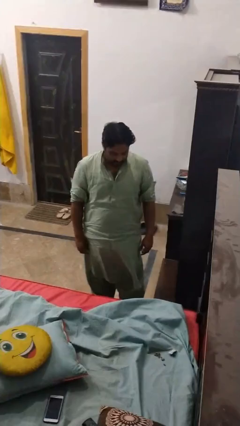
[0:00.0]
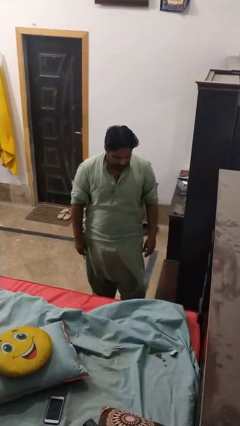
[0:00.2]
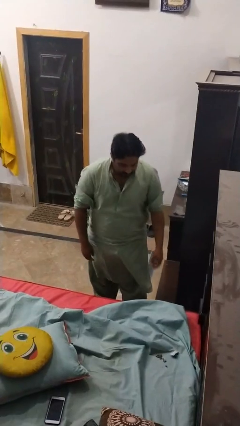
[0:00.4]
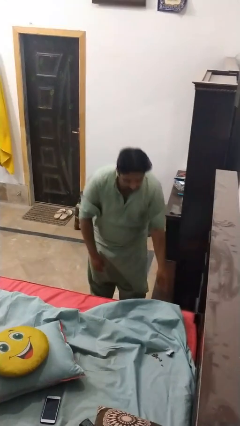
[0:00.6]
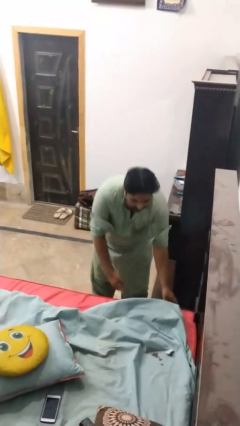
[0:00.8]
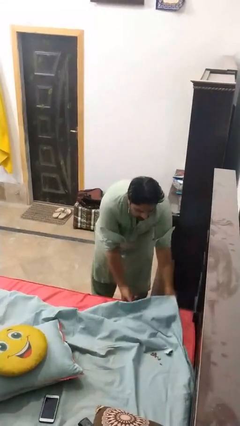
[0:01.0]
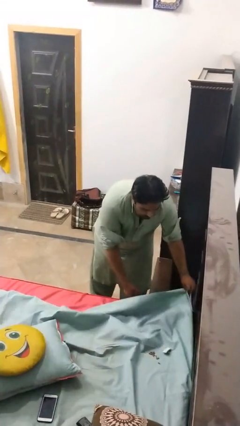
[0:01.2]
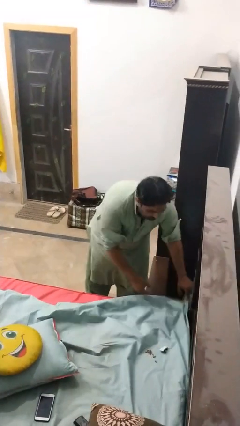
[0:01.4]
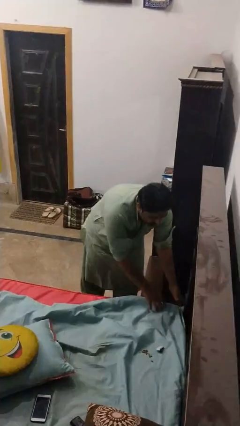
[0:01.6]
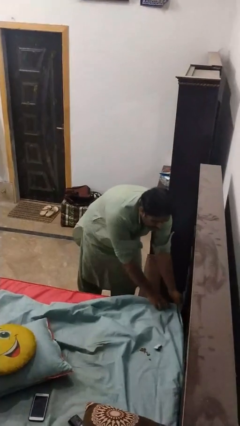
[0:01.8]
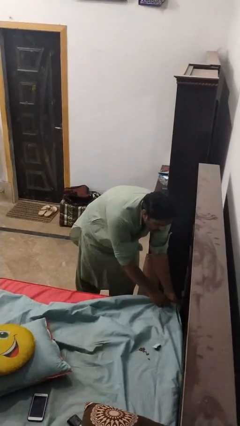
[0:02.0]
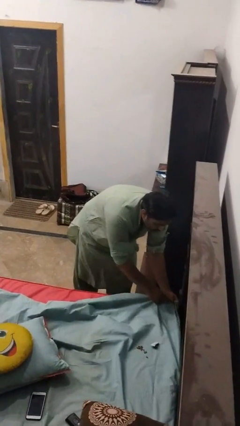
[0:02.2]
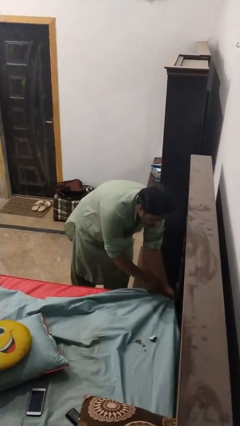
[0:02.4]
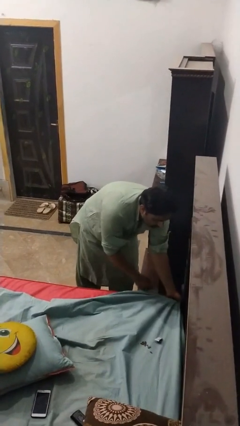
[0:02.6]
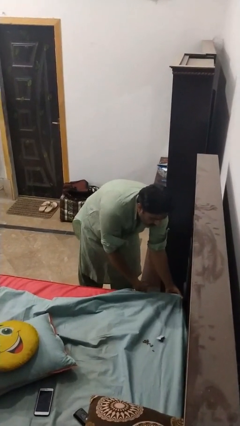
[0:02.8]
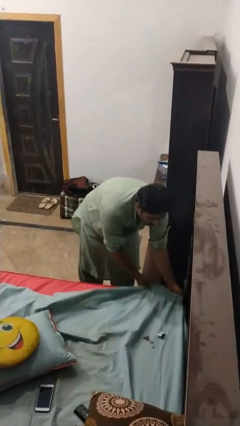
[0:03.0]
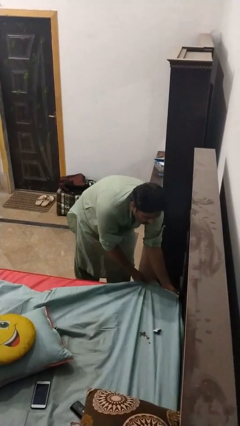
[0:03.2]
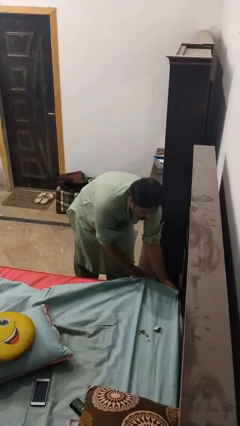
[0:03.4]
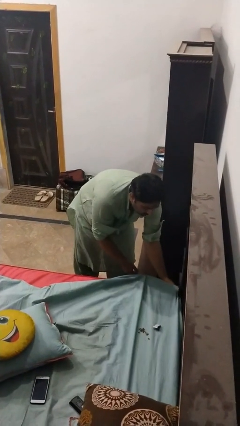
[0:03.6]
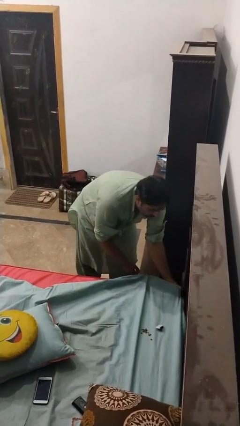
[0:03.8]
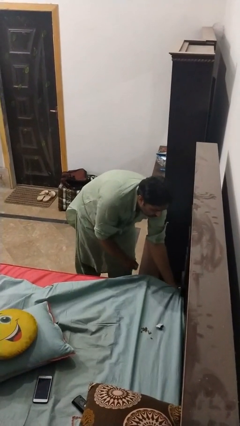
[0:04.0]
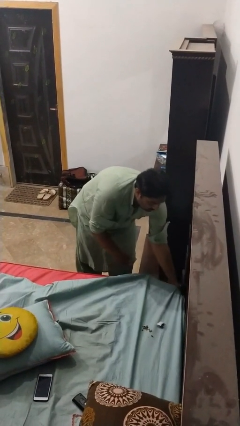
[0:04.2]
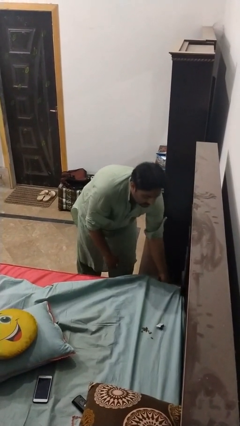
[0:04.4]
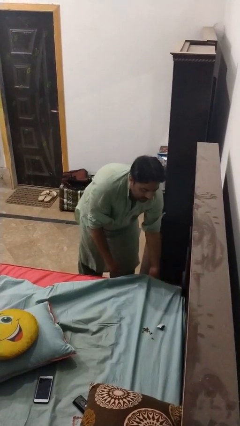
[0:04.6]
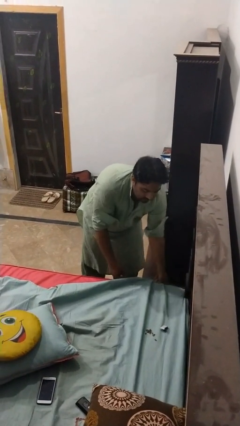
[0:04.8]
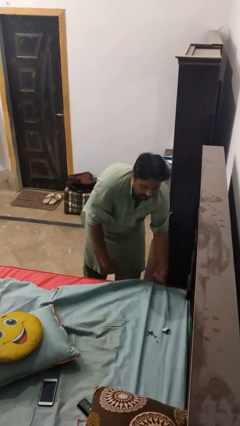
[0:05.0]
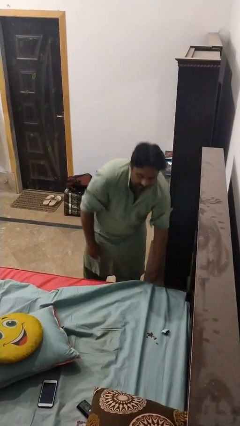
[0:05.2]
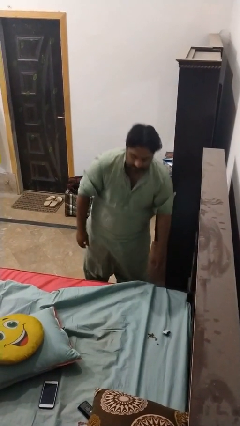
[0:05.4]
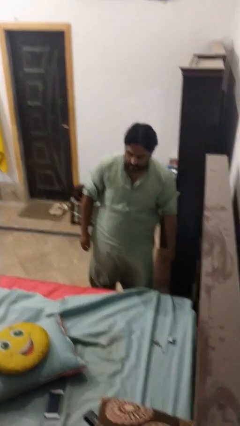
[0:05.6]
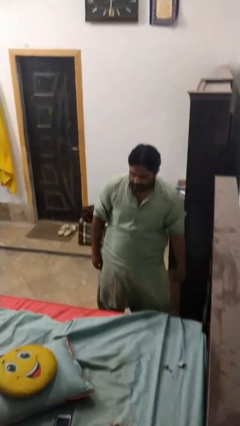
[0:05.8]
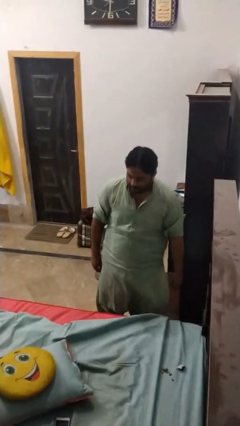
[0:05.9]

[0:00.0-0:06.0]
person makes bed

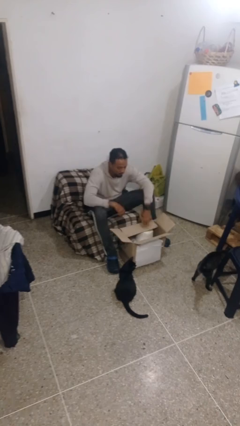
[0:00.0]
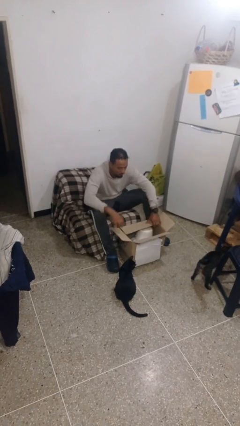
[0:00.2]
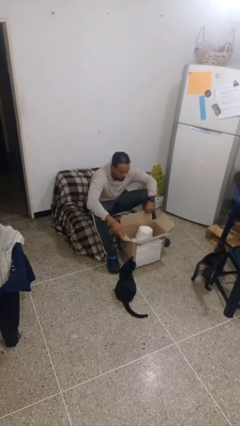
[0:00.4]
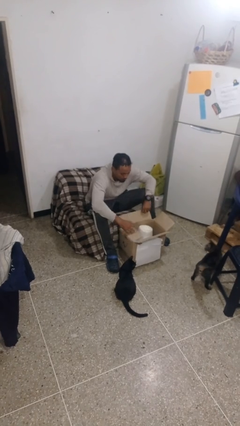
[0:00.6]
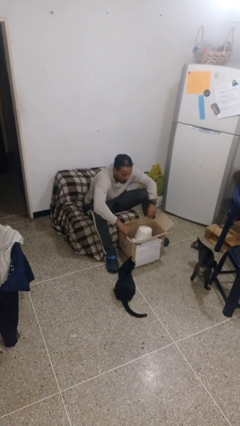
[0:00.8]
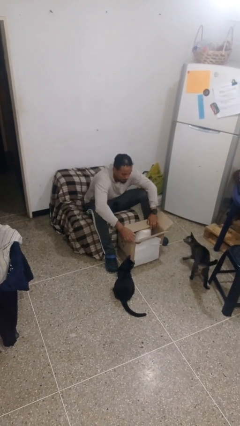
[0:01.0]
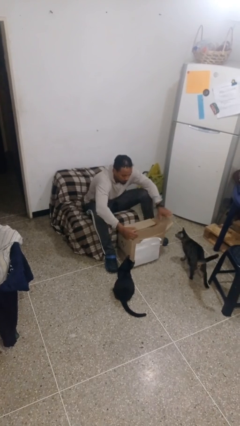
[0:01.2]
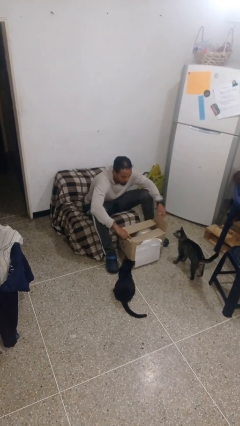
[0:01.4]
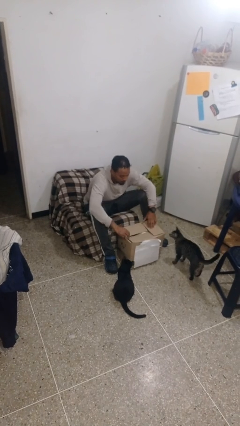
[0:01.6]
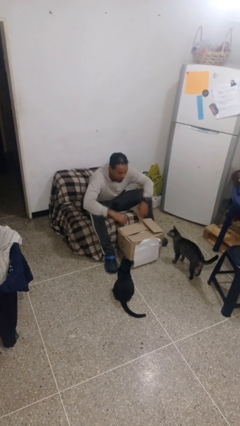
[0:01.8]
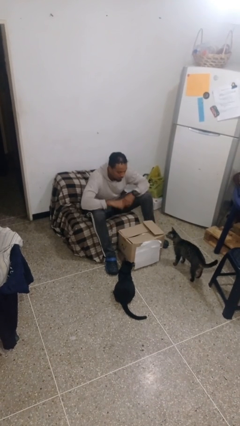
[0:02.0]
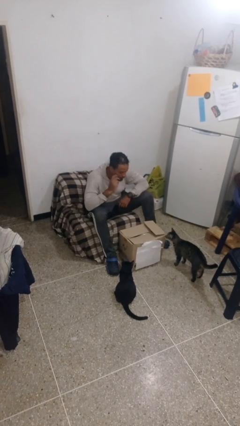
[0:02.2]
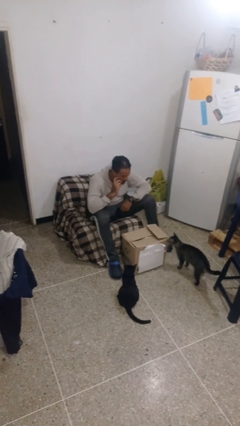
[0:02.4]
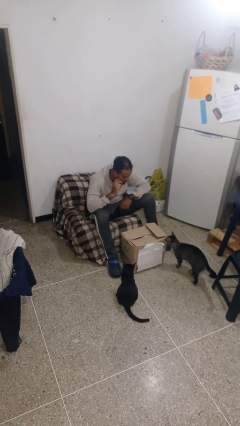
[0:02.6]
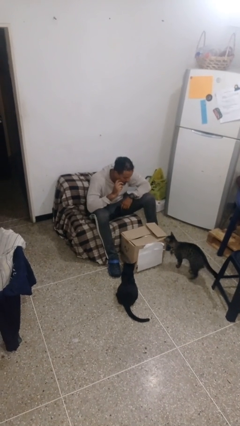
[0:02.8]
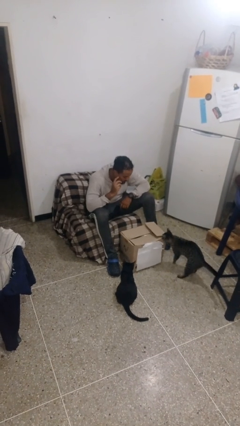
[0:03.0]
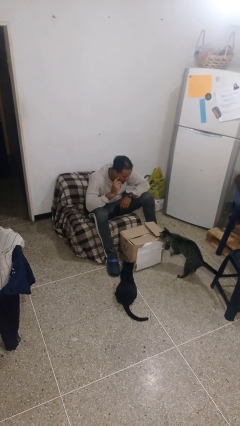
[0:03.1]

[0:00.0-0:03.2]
person closes box

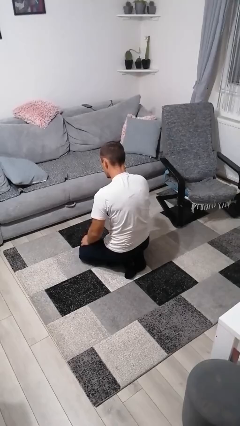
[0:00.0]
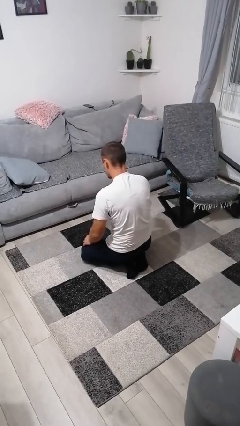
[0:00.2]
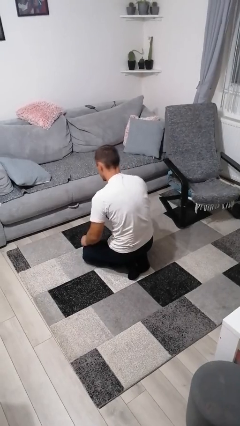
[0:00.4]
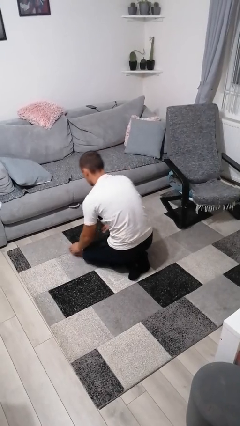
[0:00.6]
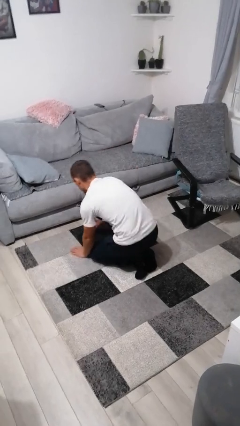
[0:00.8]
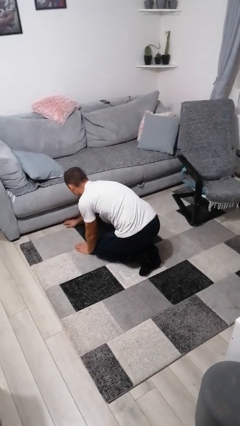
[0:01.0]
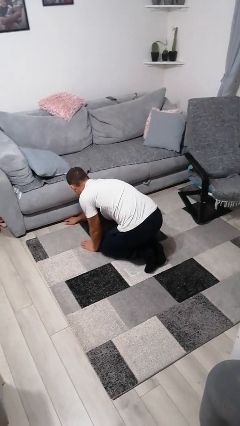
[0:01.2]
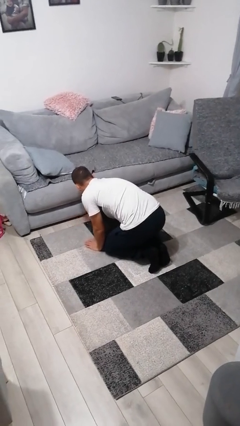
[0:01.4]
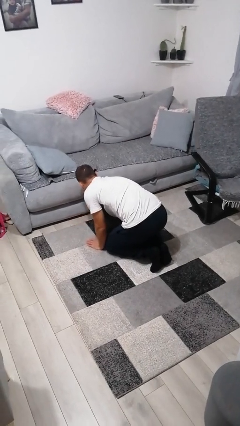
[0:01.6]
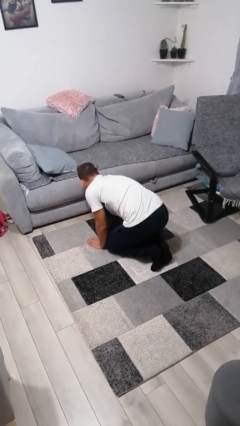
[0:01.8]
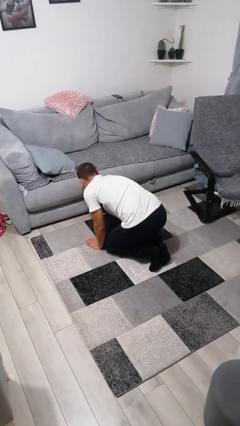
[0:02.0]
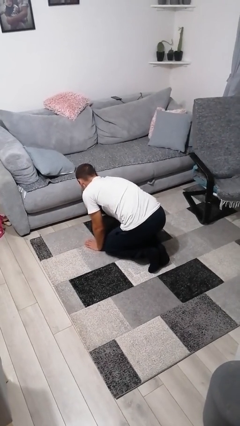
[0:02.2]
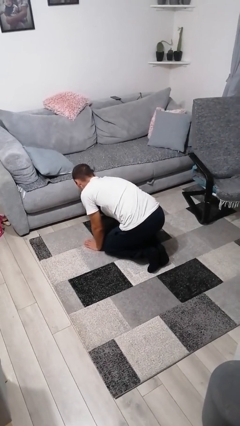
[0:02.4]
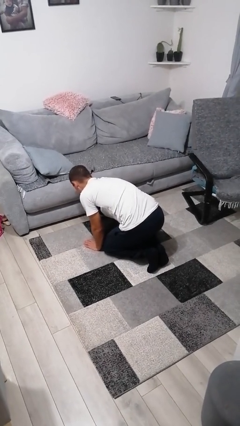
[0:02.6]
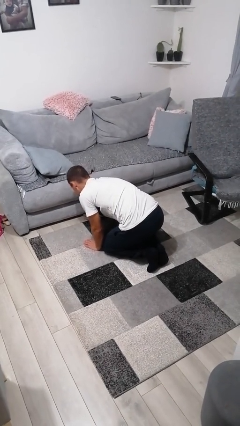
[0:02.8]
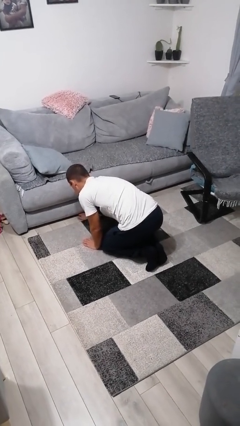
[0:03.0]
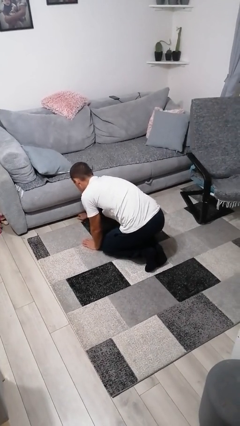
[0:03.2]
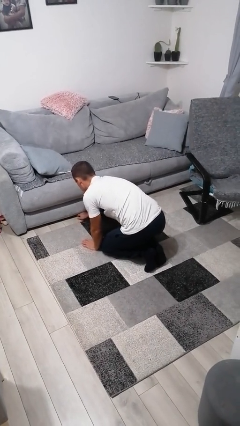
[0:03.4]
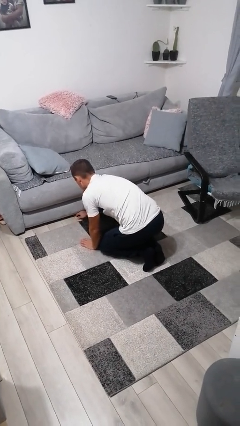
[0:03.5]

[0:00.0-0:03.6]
person searches under couch

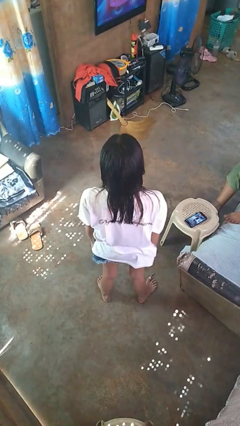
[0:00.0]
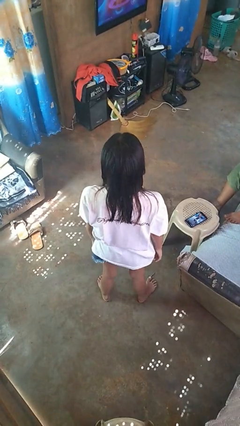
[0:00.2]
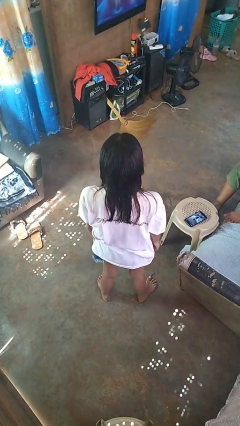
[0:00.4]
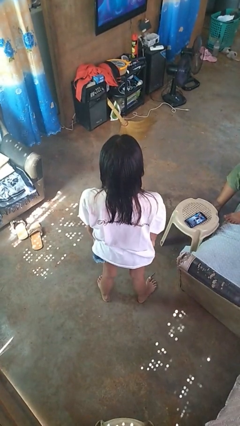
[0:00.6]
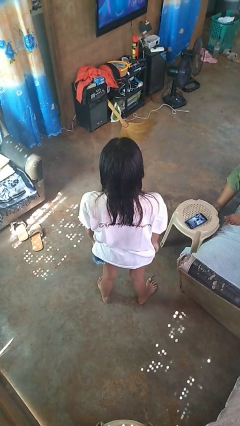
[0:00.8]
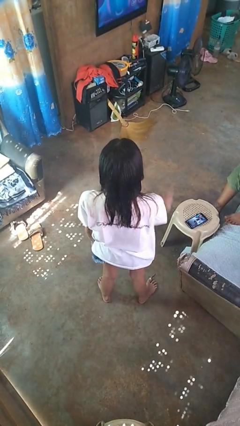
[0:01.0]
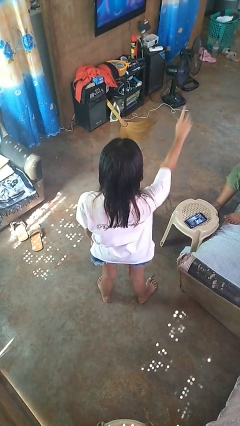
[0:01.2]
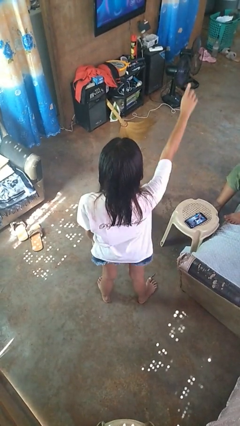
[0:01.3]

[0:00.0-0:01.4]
person gestures number three

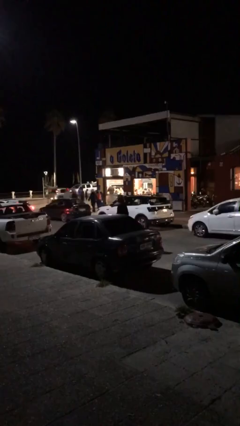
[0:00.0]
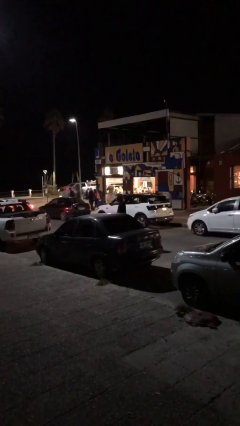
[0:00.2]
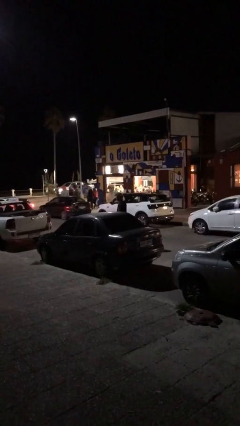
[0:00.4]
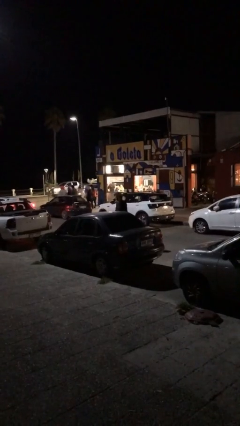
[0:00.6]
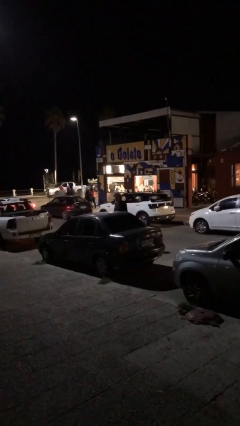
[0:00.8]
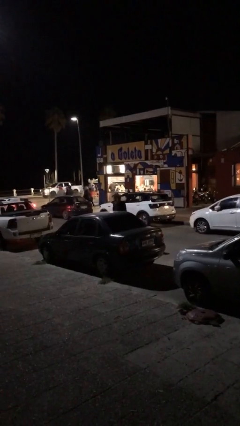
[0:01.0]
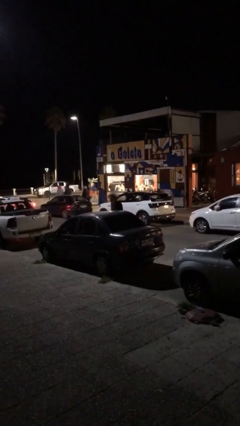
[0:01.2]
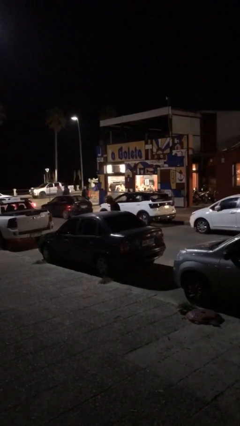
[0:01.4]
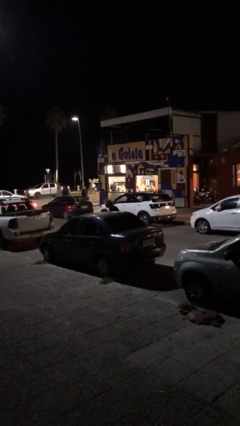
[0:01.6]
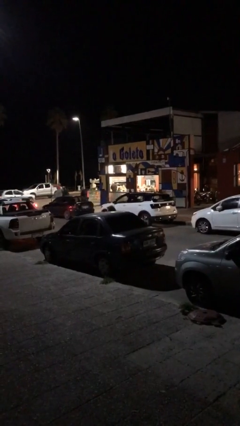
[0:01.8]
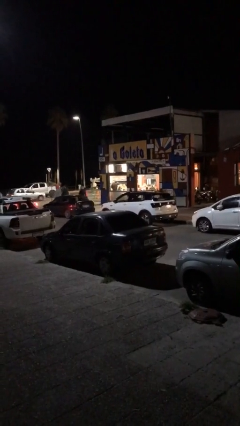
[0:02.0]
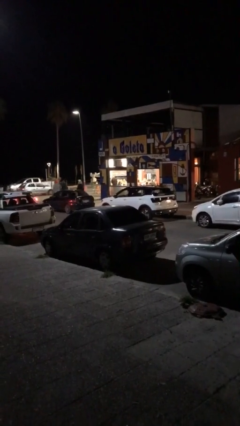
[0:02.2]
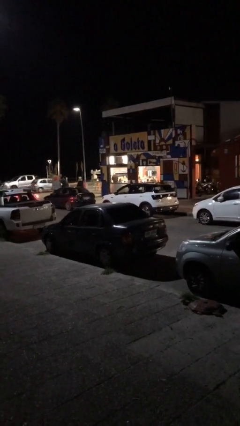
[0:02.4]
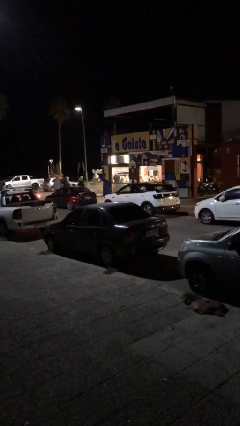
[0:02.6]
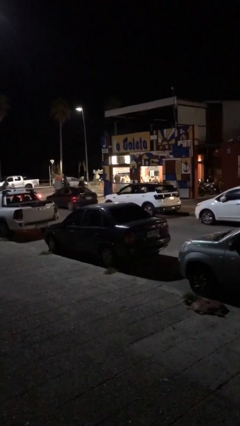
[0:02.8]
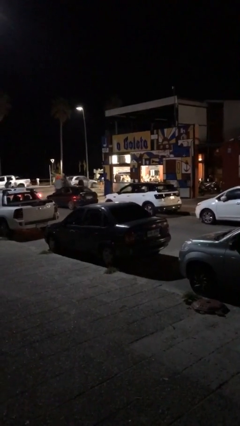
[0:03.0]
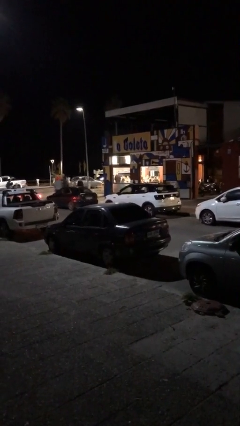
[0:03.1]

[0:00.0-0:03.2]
person enters car
